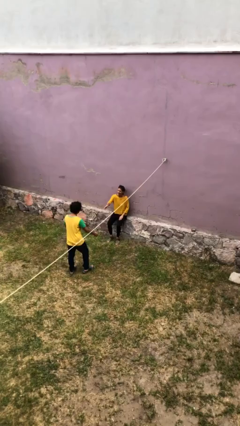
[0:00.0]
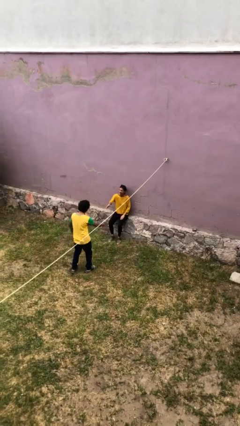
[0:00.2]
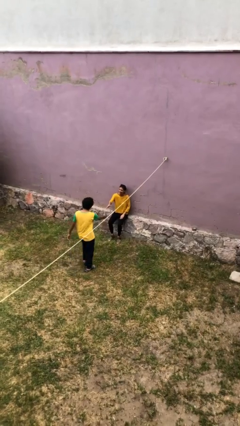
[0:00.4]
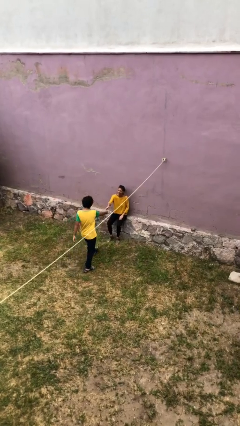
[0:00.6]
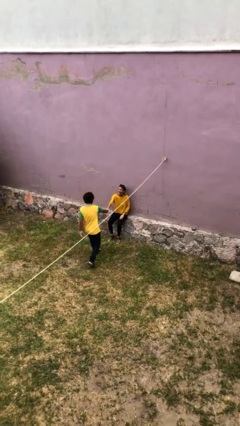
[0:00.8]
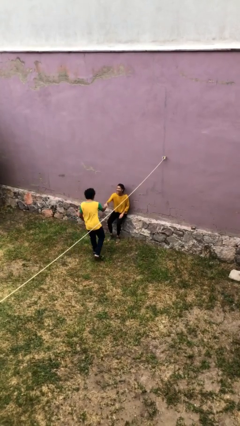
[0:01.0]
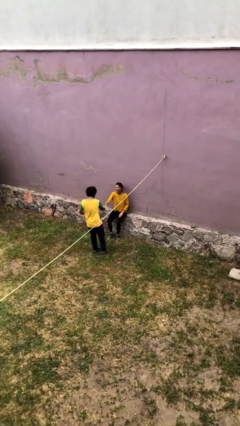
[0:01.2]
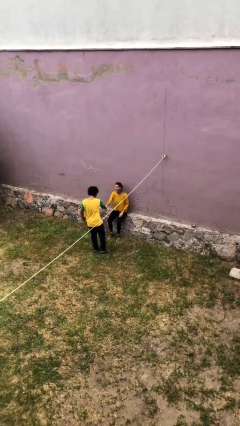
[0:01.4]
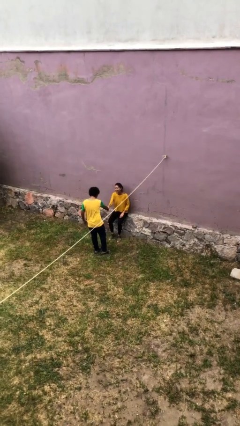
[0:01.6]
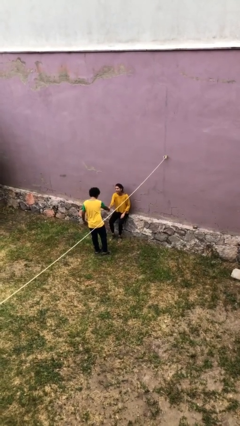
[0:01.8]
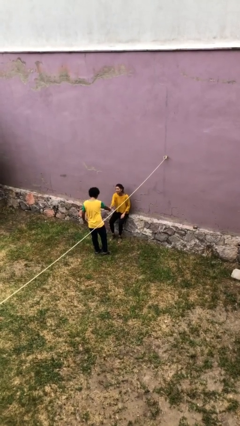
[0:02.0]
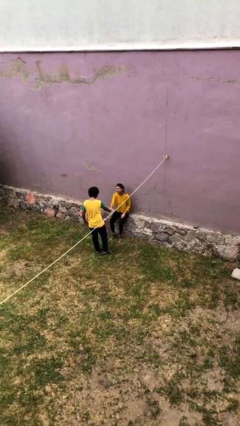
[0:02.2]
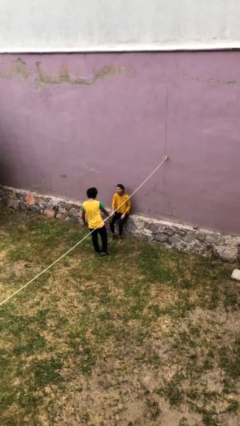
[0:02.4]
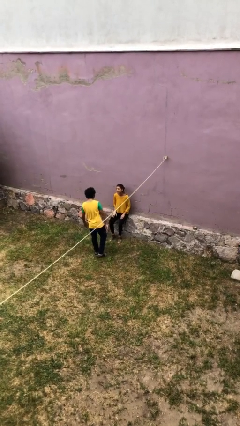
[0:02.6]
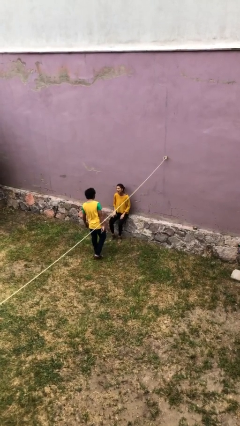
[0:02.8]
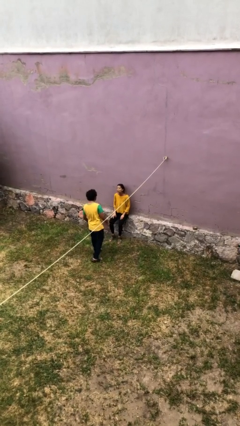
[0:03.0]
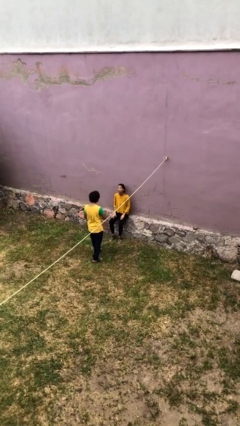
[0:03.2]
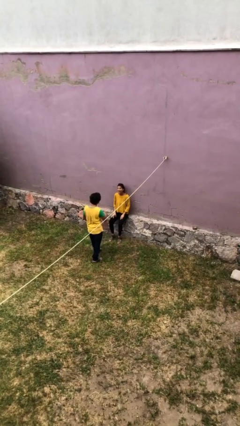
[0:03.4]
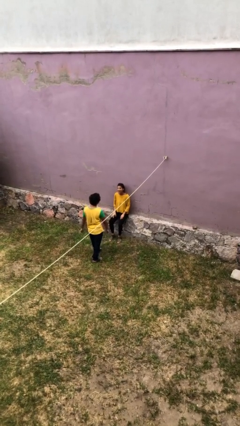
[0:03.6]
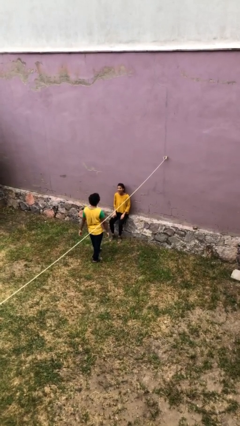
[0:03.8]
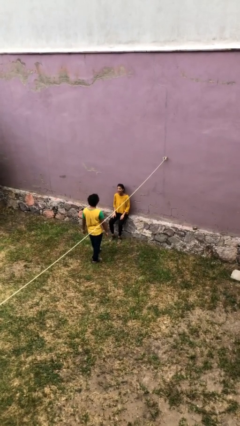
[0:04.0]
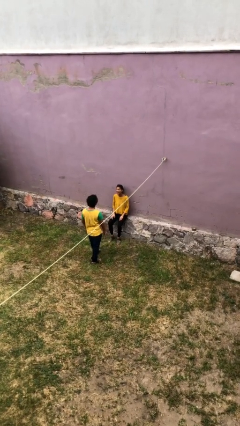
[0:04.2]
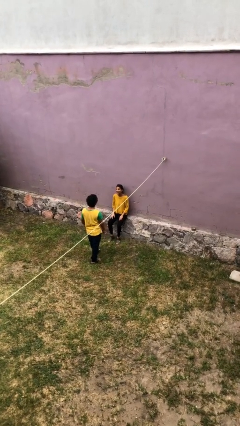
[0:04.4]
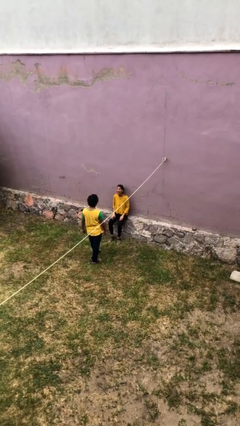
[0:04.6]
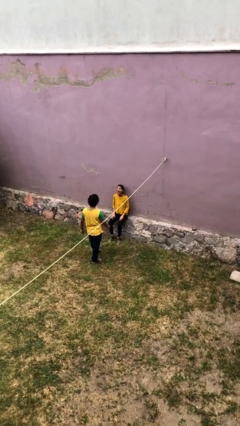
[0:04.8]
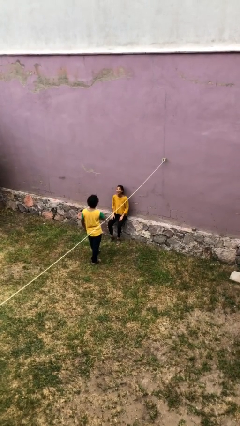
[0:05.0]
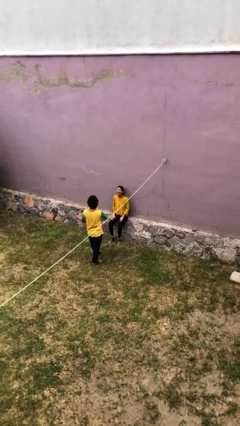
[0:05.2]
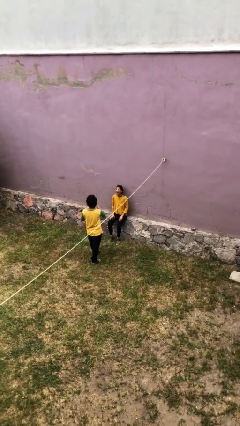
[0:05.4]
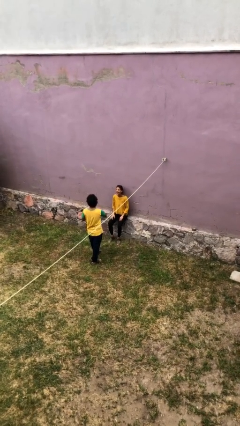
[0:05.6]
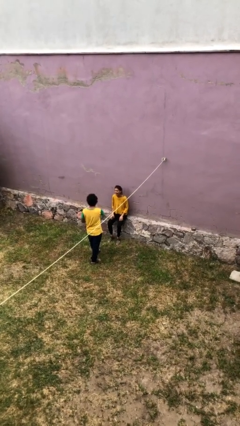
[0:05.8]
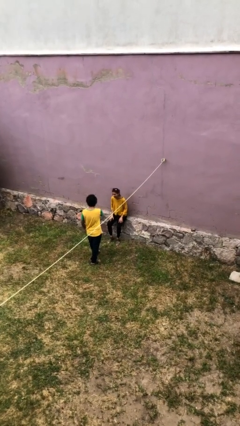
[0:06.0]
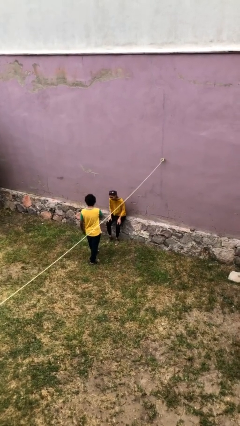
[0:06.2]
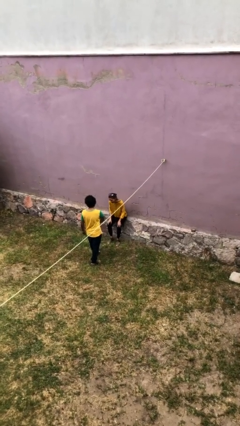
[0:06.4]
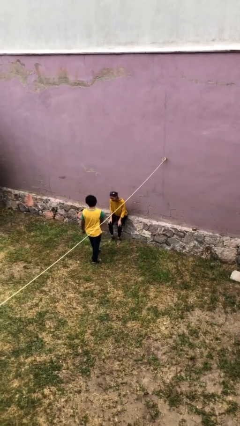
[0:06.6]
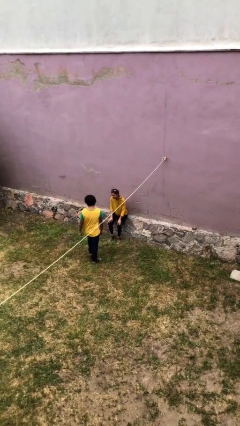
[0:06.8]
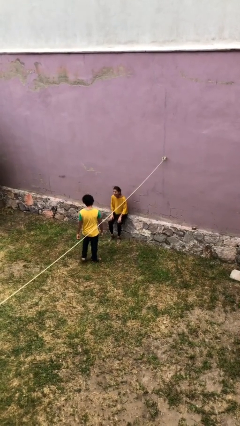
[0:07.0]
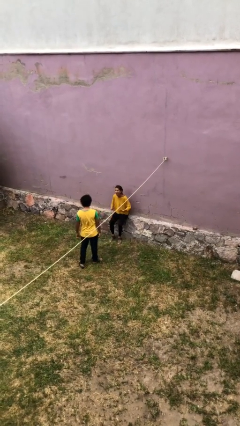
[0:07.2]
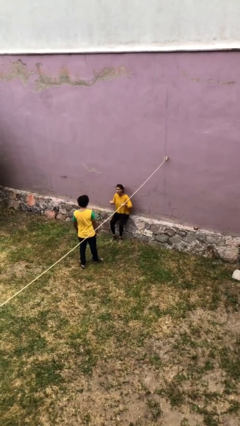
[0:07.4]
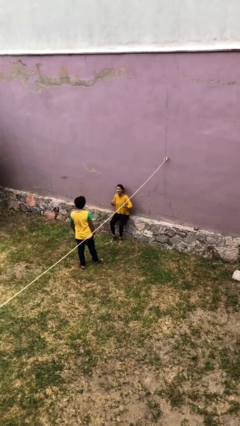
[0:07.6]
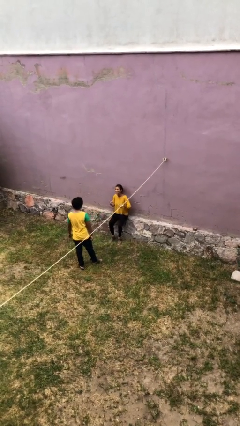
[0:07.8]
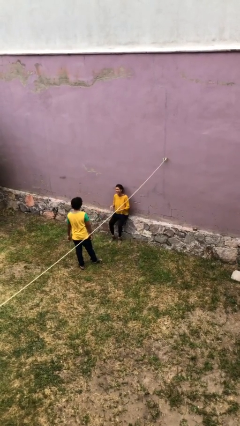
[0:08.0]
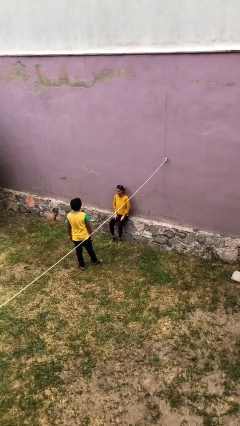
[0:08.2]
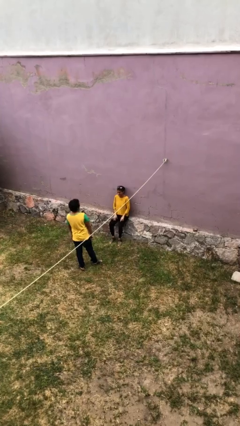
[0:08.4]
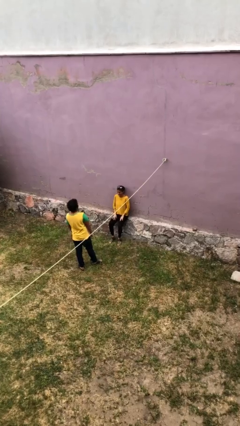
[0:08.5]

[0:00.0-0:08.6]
person shakes hand

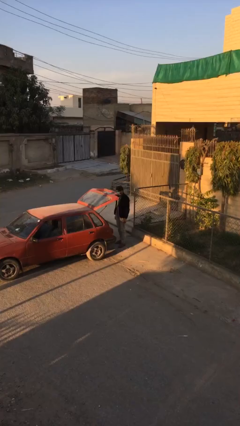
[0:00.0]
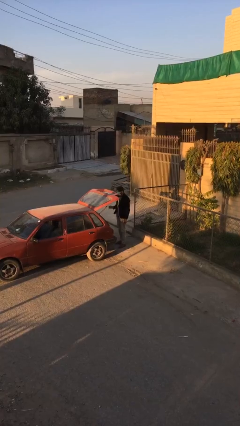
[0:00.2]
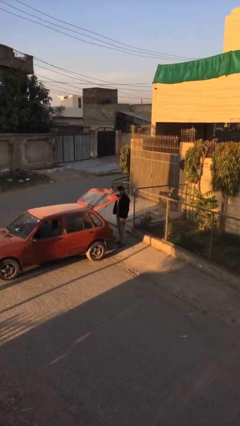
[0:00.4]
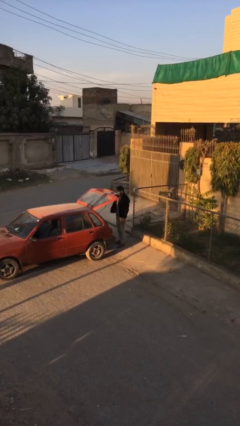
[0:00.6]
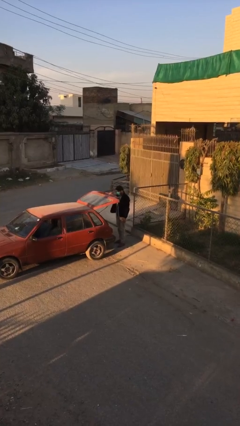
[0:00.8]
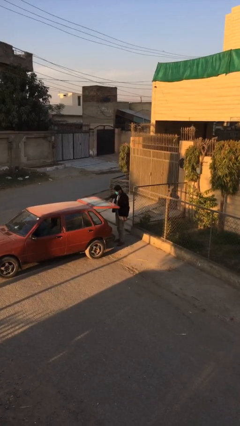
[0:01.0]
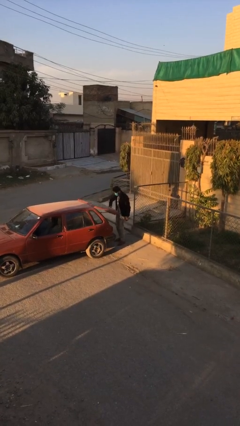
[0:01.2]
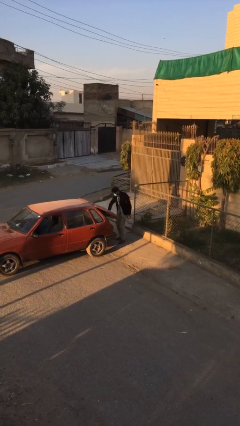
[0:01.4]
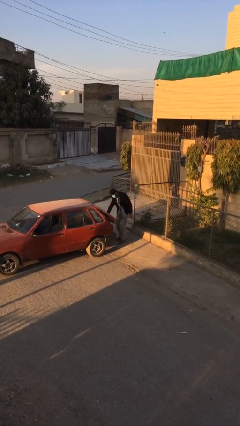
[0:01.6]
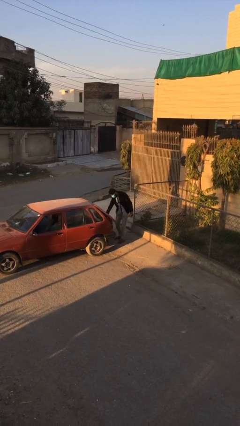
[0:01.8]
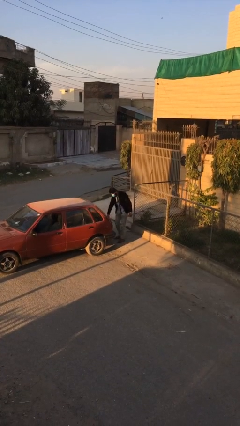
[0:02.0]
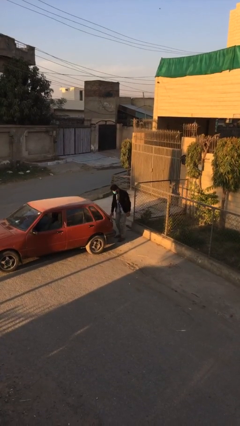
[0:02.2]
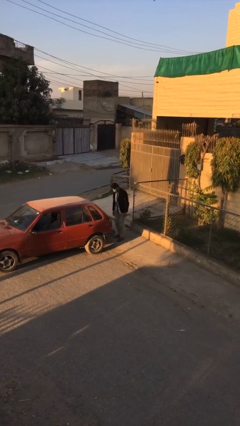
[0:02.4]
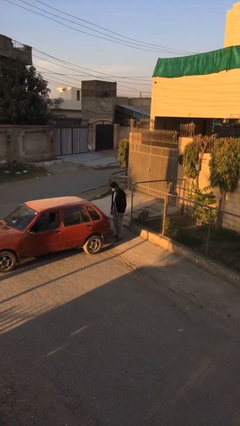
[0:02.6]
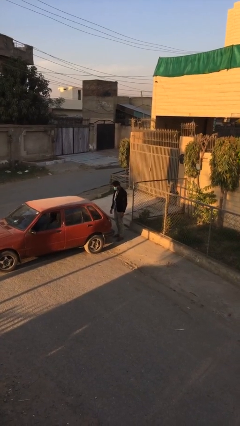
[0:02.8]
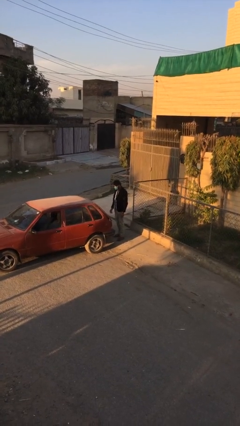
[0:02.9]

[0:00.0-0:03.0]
person closes car trunk

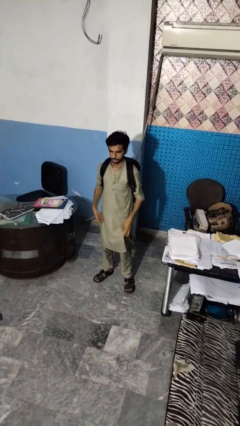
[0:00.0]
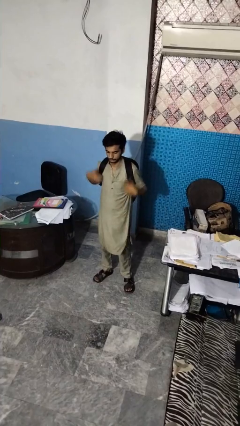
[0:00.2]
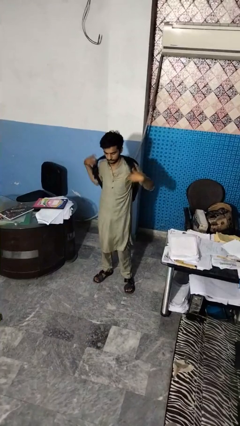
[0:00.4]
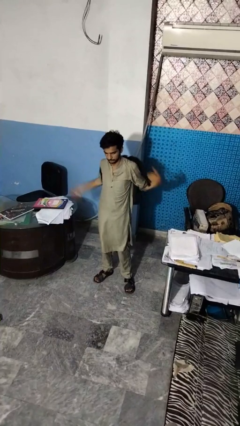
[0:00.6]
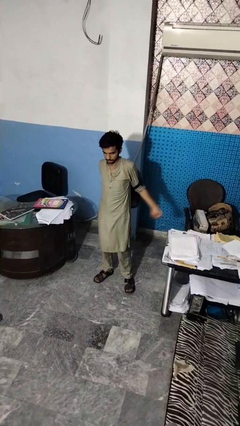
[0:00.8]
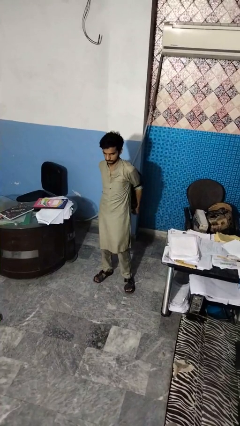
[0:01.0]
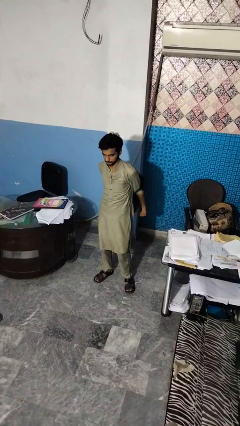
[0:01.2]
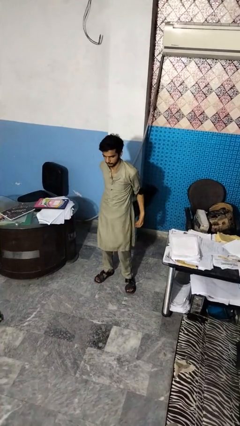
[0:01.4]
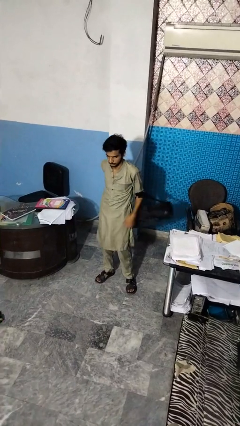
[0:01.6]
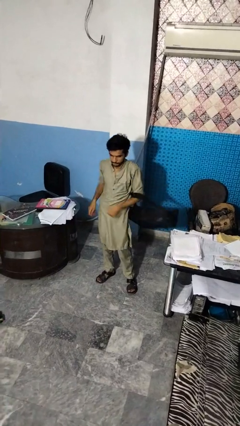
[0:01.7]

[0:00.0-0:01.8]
person takes off backpack

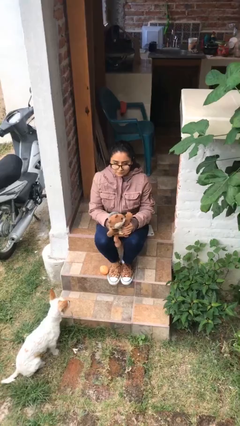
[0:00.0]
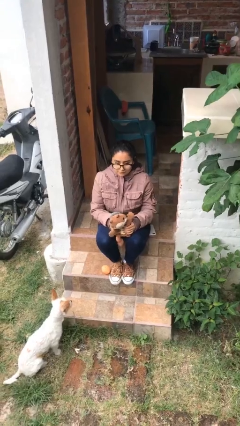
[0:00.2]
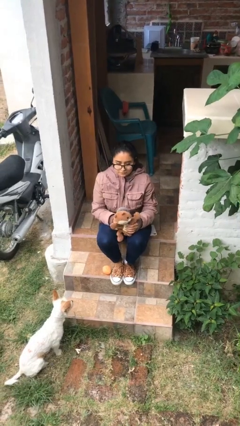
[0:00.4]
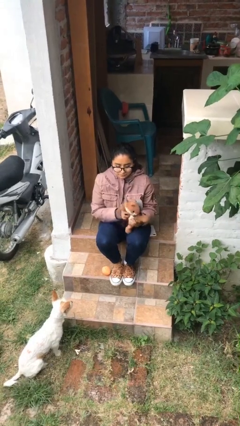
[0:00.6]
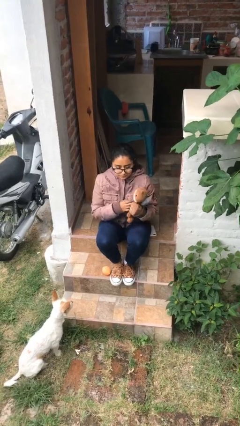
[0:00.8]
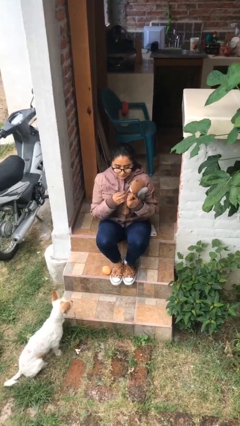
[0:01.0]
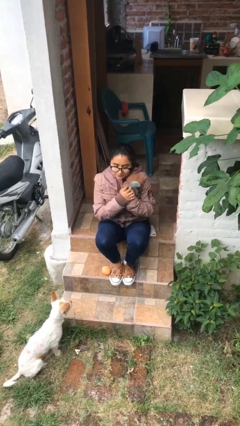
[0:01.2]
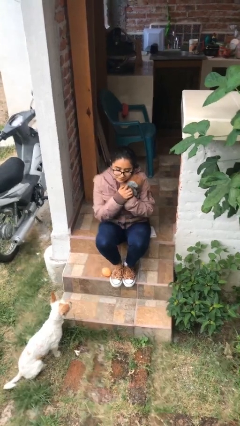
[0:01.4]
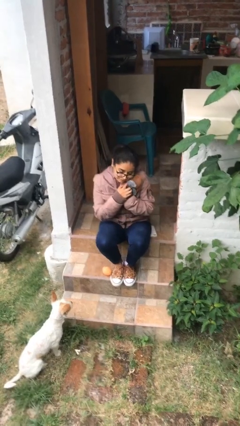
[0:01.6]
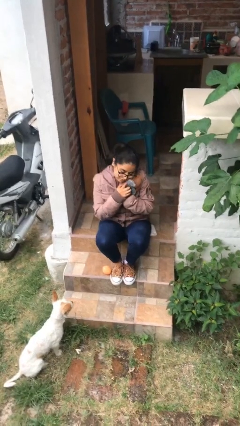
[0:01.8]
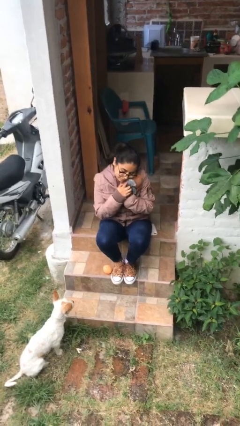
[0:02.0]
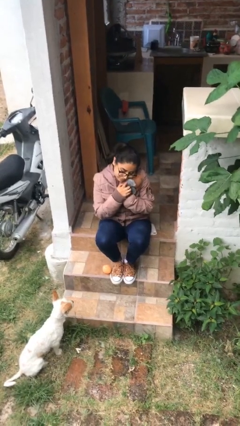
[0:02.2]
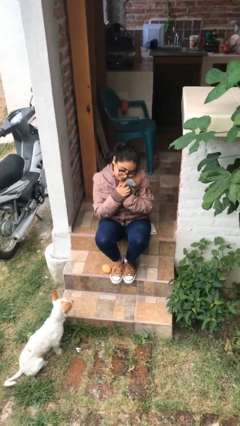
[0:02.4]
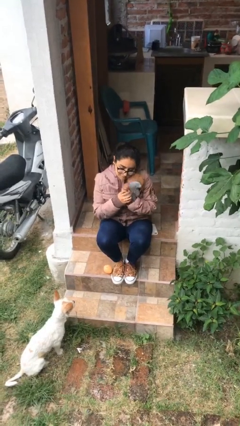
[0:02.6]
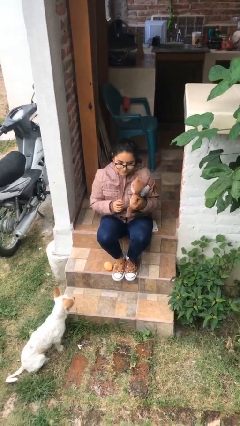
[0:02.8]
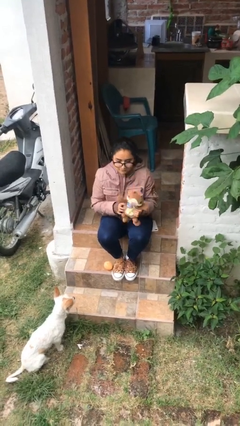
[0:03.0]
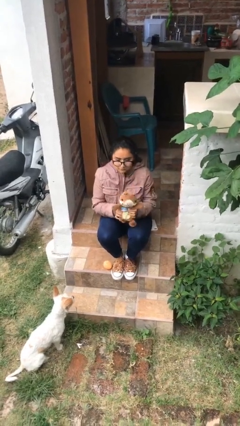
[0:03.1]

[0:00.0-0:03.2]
person hugs stuffed animal

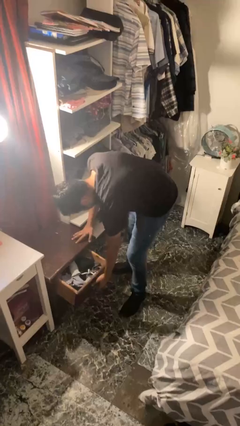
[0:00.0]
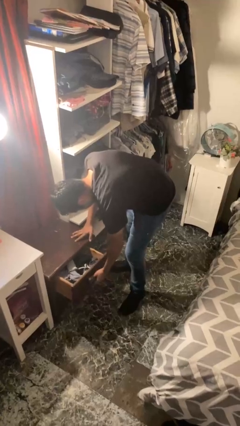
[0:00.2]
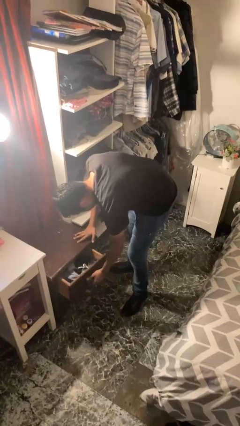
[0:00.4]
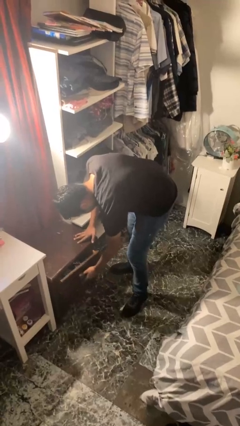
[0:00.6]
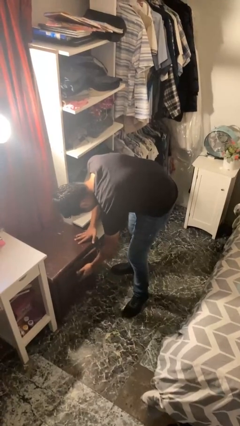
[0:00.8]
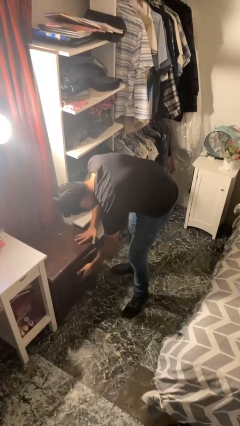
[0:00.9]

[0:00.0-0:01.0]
person closes dresser drawer
